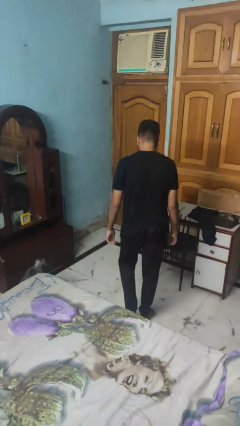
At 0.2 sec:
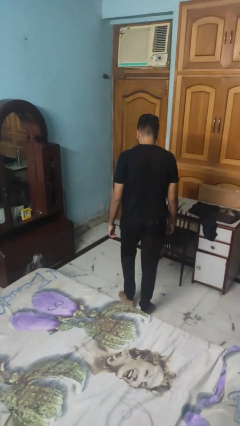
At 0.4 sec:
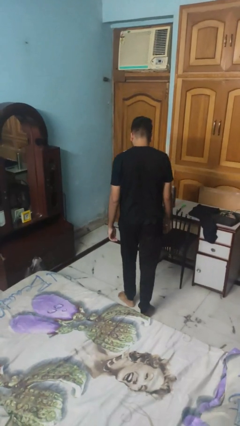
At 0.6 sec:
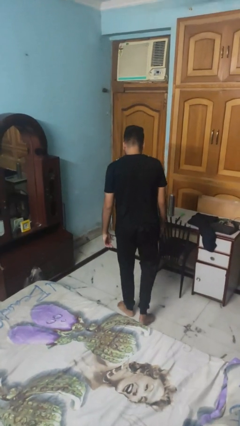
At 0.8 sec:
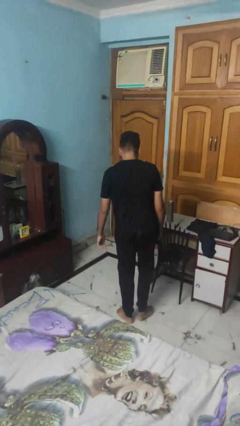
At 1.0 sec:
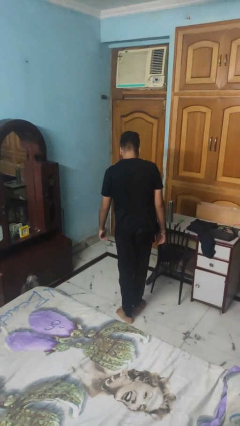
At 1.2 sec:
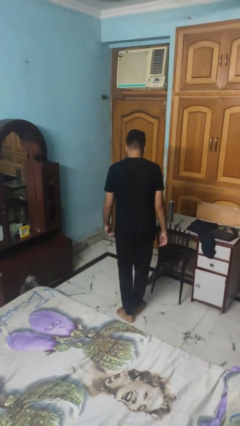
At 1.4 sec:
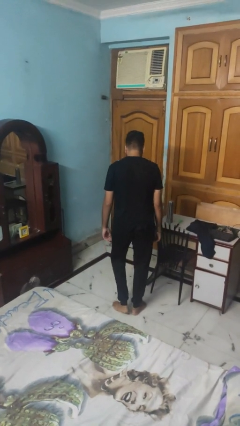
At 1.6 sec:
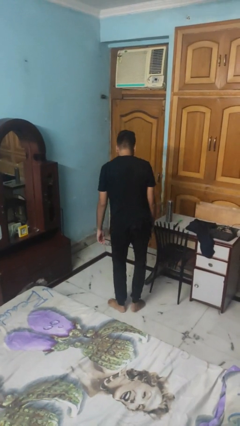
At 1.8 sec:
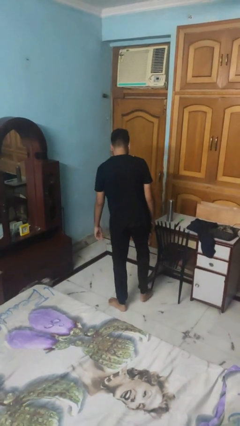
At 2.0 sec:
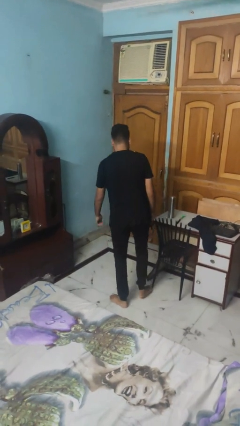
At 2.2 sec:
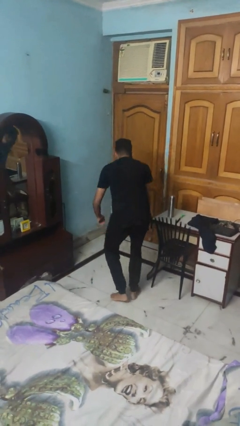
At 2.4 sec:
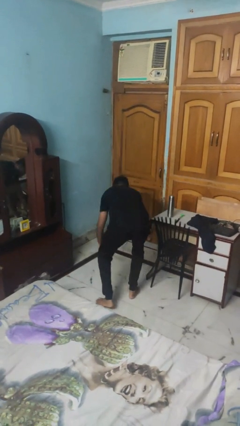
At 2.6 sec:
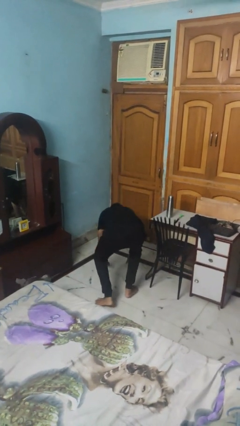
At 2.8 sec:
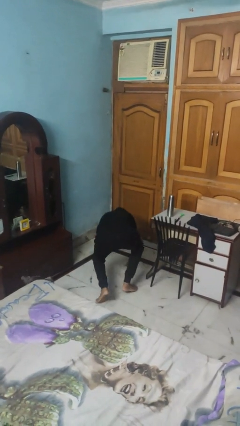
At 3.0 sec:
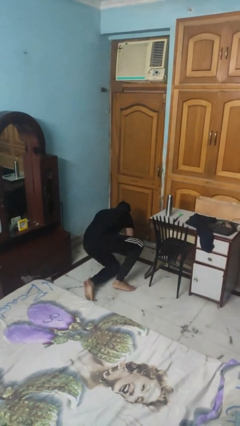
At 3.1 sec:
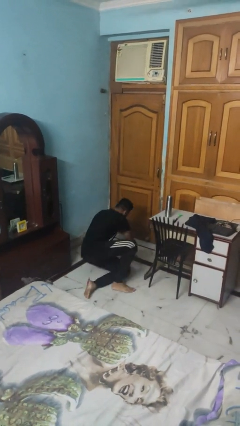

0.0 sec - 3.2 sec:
person trips on object on floor

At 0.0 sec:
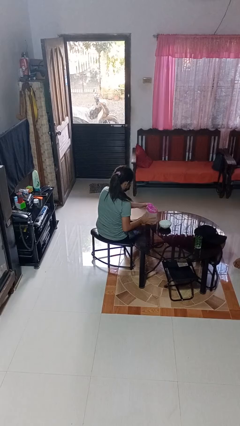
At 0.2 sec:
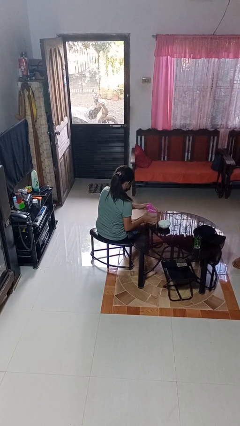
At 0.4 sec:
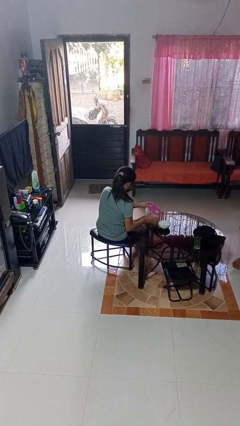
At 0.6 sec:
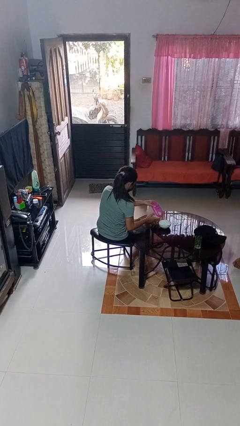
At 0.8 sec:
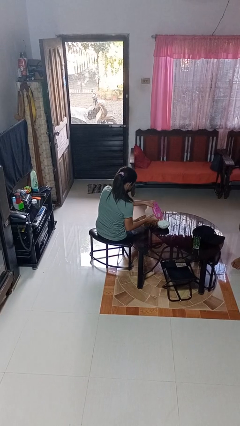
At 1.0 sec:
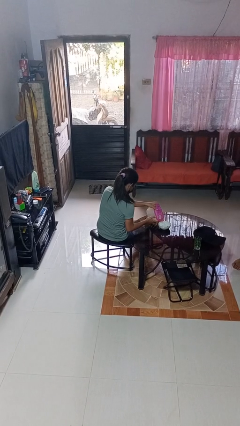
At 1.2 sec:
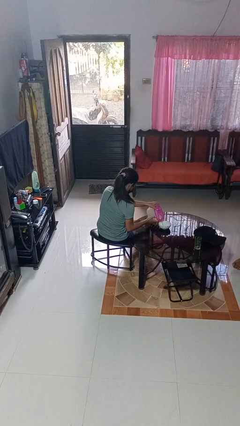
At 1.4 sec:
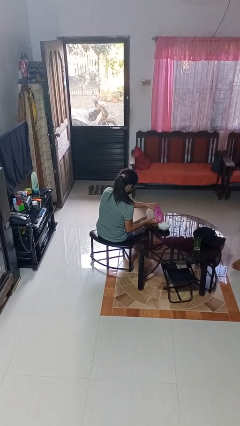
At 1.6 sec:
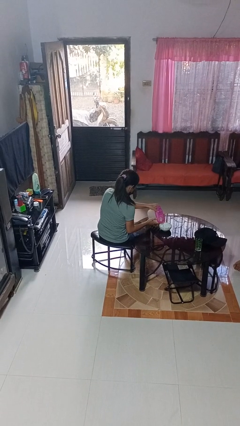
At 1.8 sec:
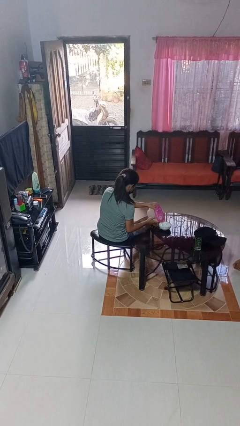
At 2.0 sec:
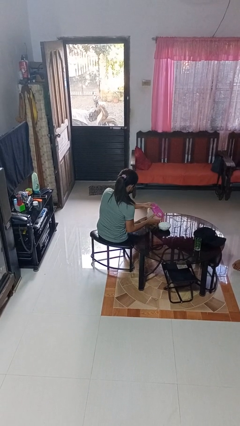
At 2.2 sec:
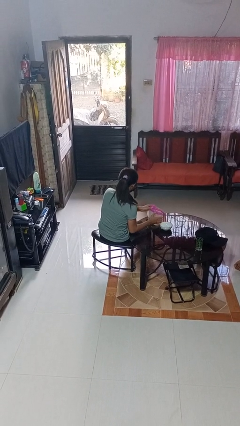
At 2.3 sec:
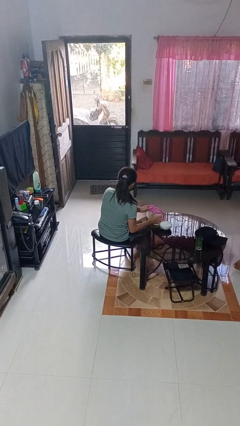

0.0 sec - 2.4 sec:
person pours into bowl

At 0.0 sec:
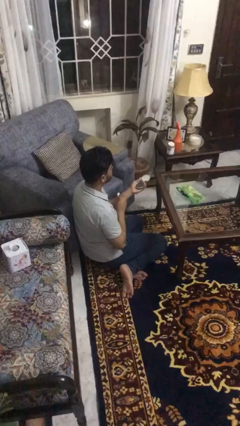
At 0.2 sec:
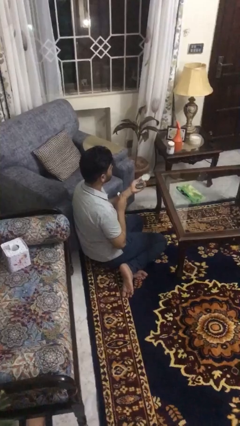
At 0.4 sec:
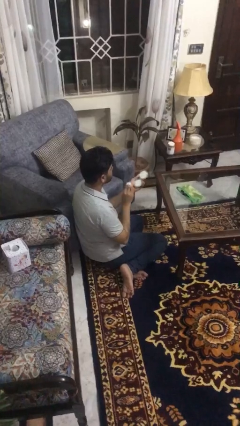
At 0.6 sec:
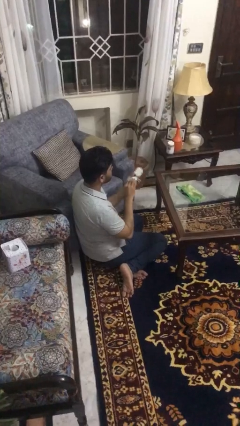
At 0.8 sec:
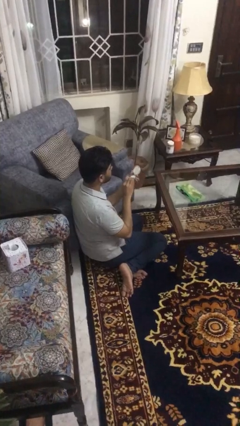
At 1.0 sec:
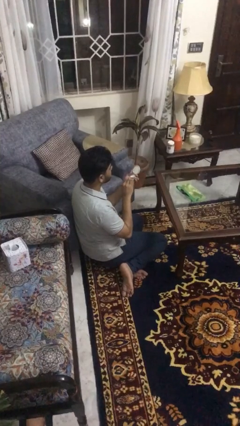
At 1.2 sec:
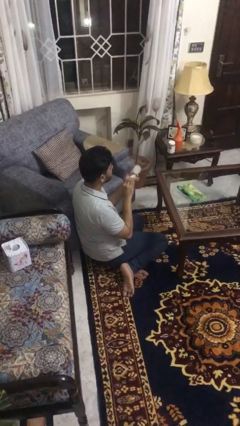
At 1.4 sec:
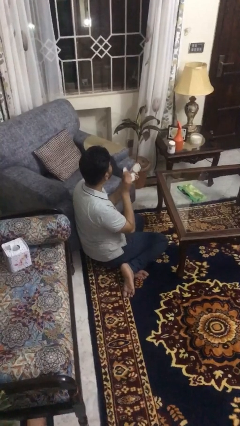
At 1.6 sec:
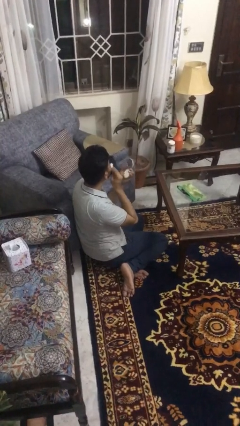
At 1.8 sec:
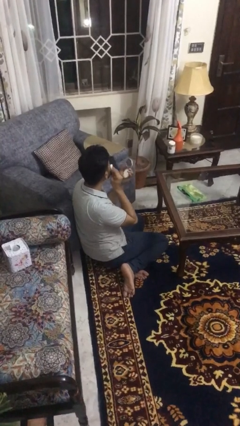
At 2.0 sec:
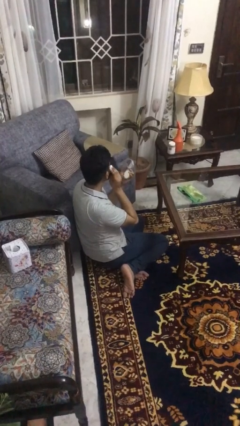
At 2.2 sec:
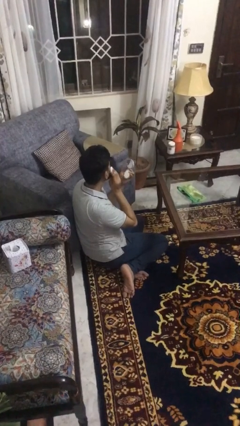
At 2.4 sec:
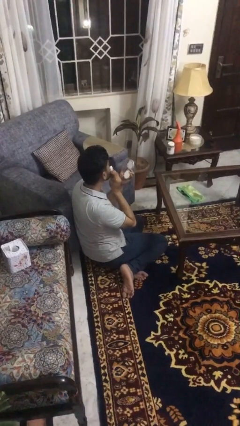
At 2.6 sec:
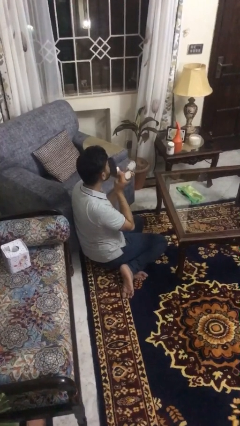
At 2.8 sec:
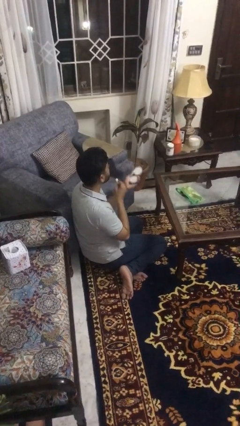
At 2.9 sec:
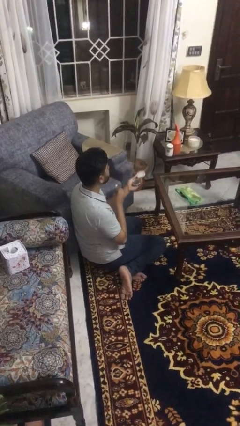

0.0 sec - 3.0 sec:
person applies foundation makeup

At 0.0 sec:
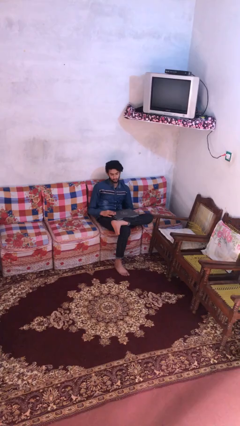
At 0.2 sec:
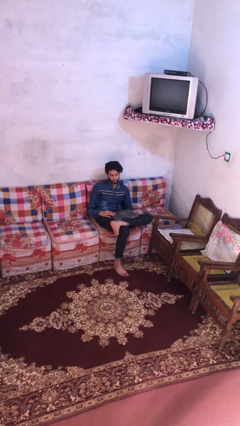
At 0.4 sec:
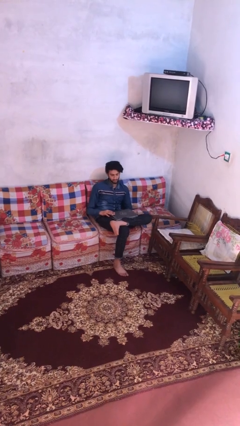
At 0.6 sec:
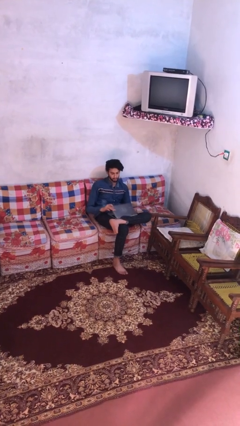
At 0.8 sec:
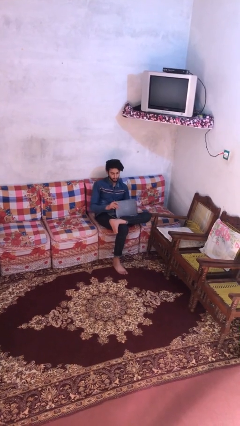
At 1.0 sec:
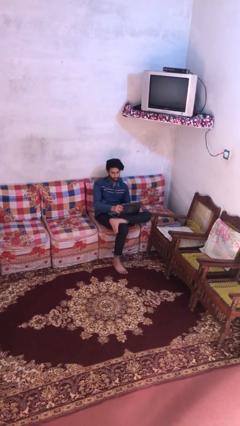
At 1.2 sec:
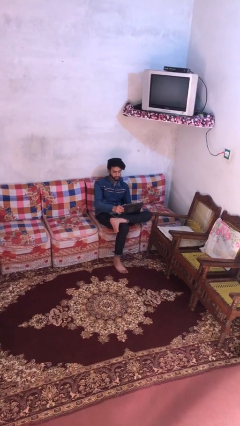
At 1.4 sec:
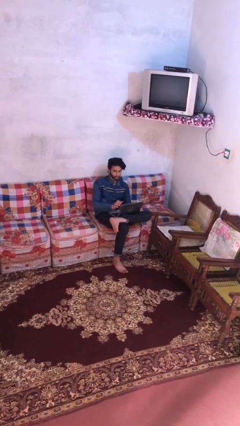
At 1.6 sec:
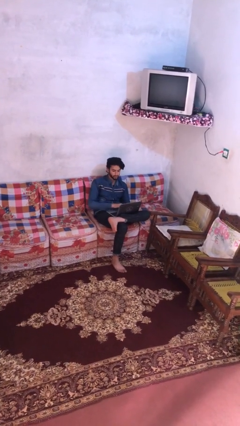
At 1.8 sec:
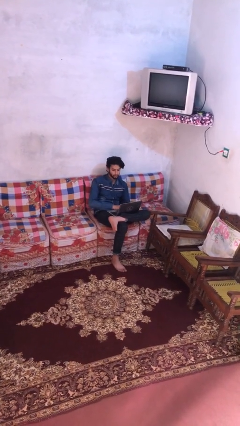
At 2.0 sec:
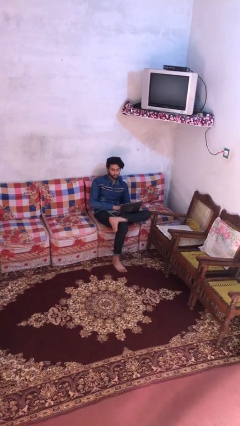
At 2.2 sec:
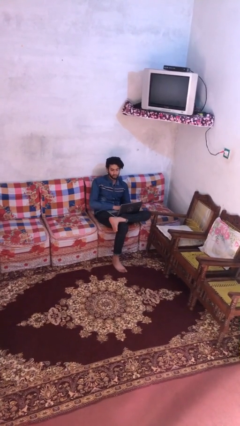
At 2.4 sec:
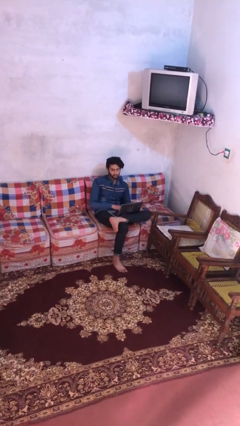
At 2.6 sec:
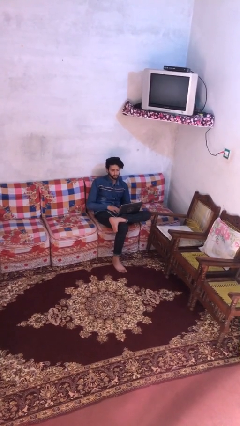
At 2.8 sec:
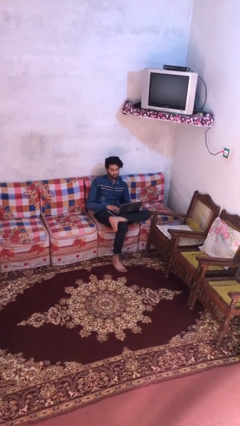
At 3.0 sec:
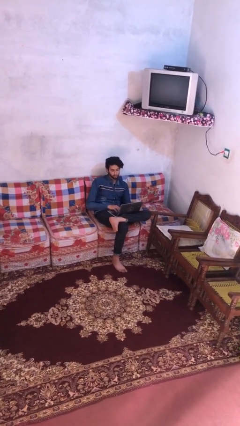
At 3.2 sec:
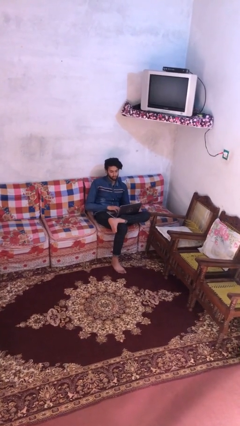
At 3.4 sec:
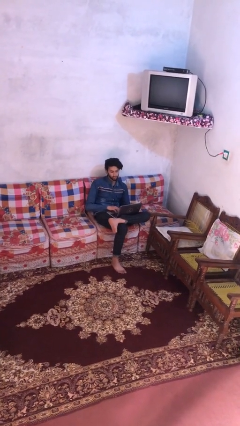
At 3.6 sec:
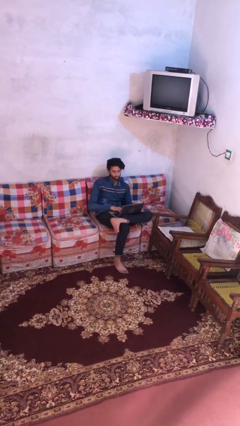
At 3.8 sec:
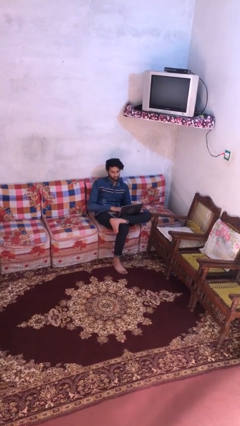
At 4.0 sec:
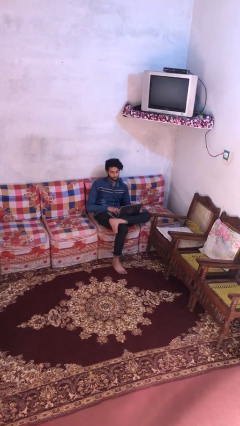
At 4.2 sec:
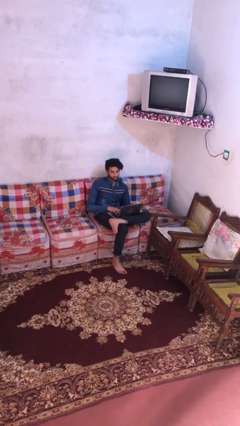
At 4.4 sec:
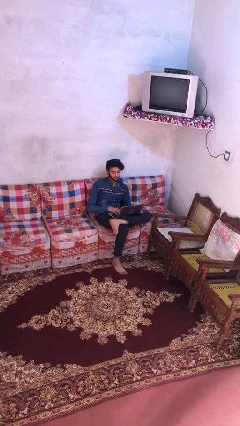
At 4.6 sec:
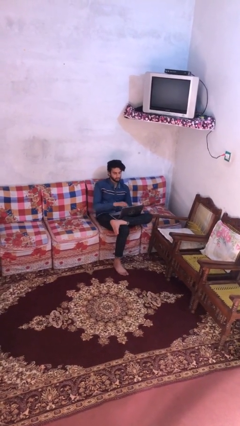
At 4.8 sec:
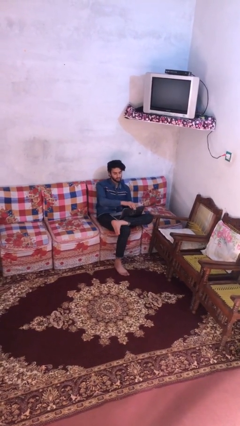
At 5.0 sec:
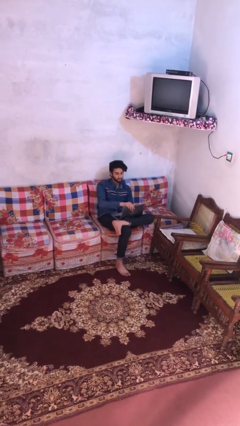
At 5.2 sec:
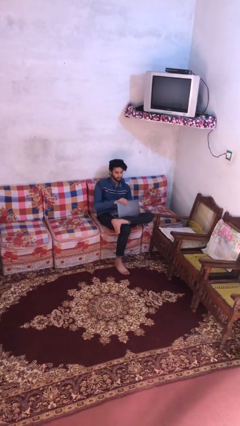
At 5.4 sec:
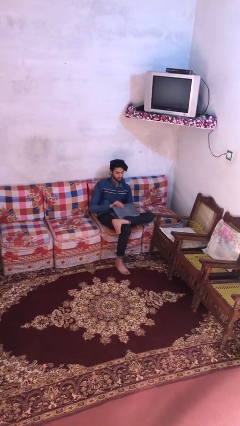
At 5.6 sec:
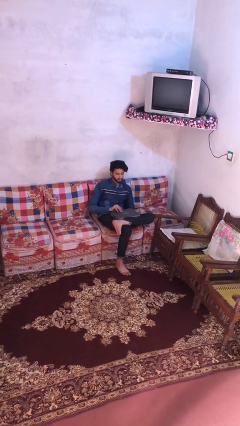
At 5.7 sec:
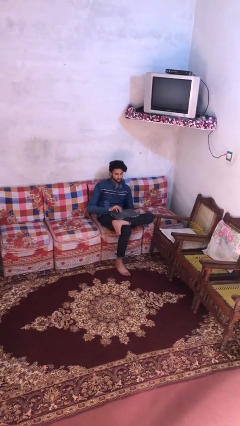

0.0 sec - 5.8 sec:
person interacts with laptop

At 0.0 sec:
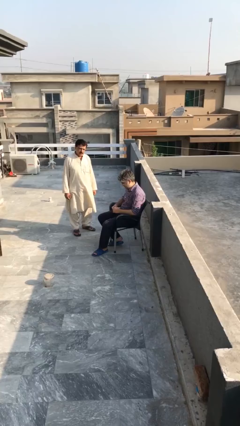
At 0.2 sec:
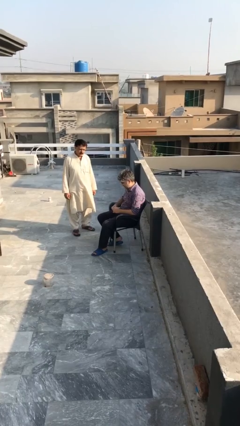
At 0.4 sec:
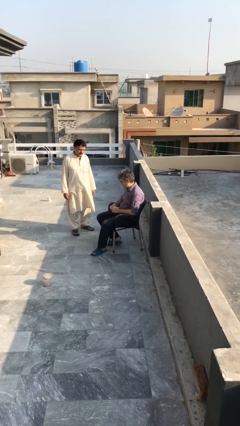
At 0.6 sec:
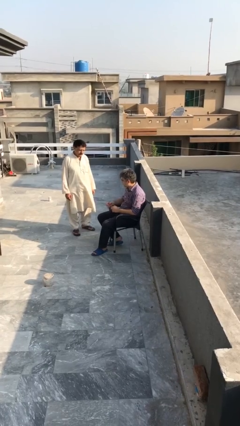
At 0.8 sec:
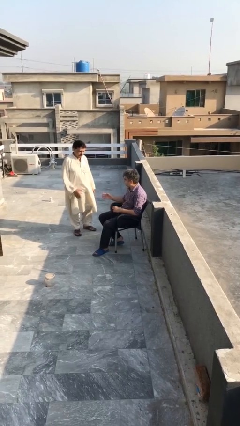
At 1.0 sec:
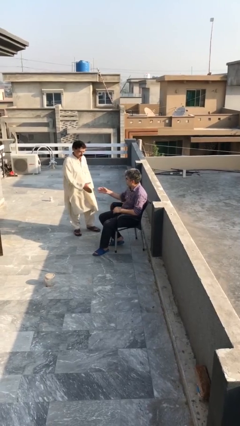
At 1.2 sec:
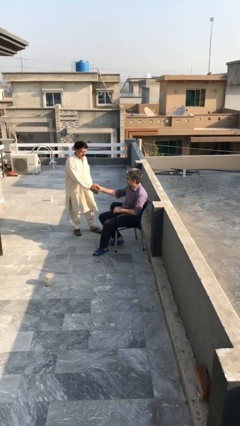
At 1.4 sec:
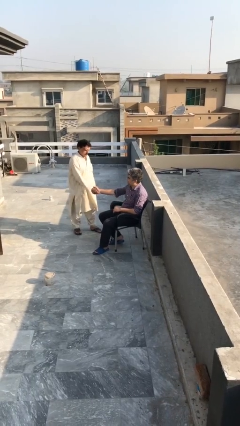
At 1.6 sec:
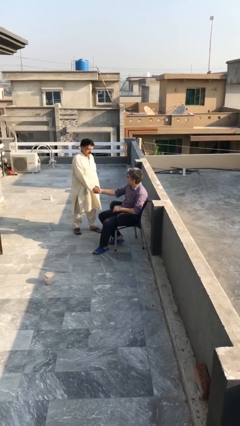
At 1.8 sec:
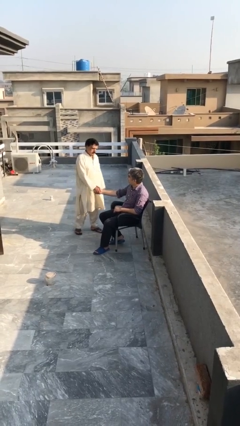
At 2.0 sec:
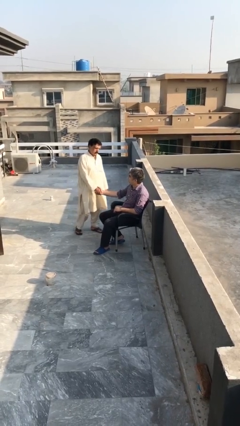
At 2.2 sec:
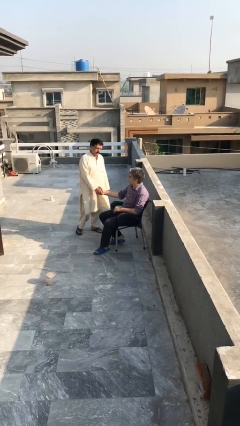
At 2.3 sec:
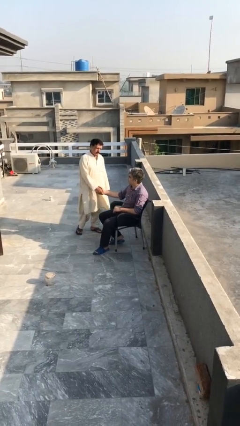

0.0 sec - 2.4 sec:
person shakes hand

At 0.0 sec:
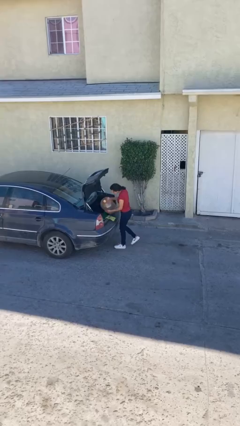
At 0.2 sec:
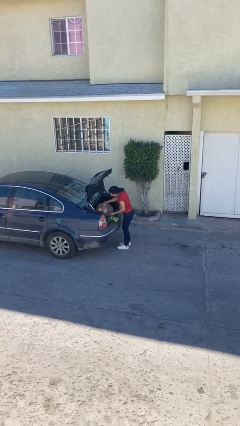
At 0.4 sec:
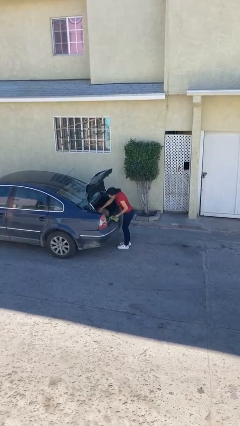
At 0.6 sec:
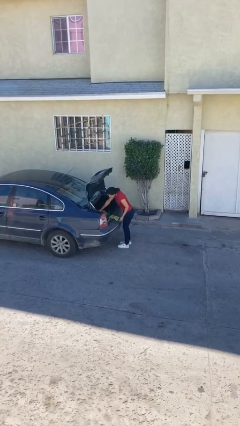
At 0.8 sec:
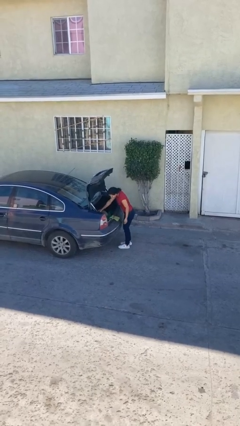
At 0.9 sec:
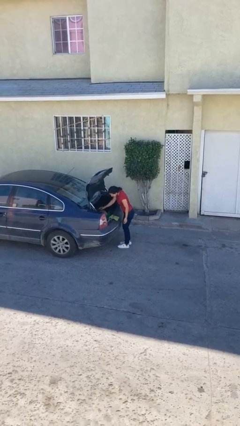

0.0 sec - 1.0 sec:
person loads car
